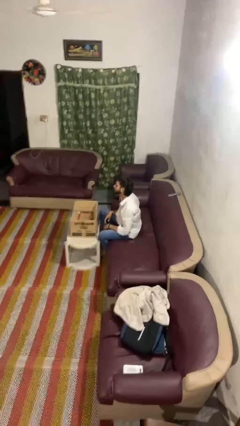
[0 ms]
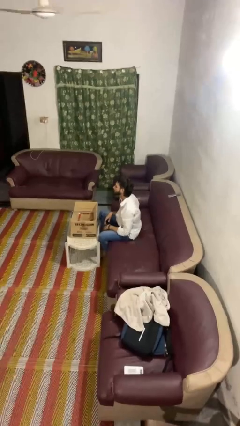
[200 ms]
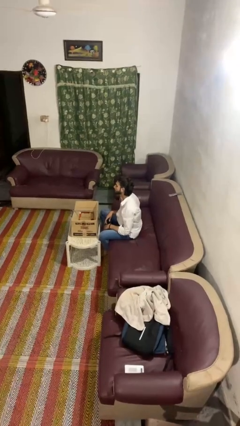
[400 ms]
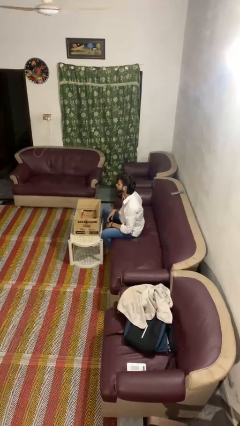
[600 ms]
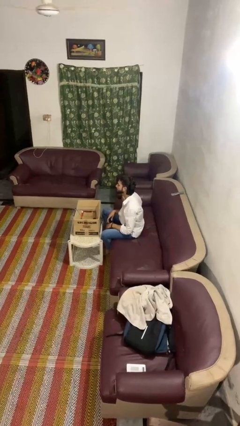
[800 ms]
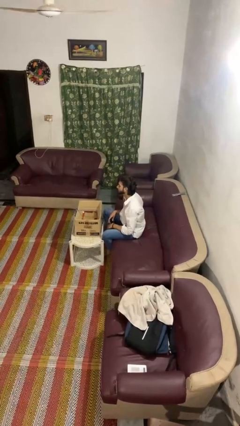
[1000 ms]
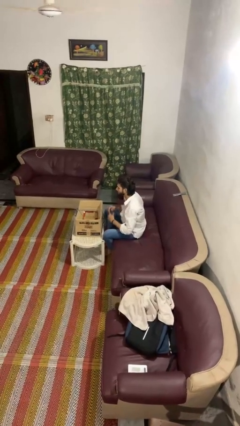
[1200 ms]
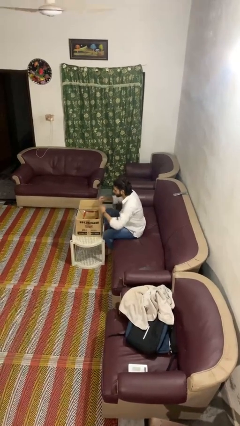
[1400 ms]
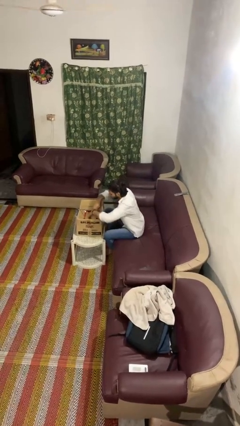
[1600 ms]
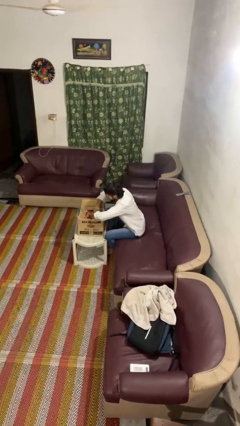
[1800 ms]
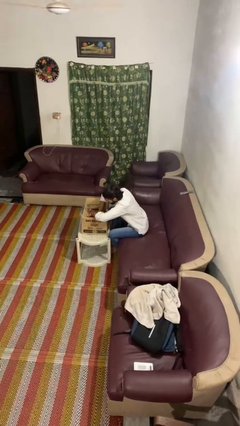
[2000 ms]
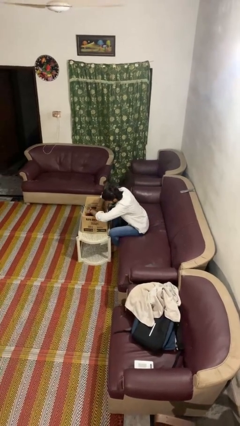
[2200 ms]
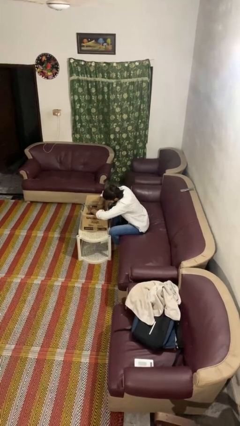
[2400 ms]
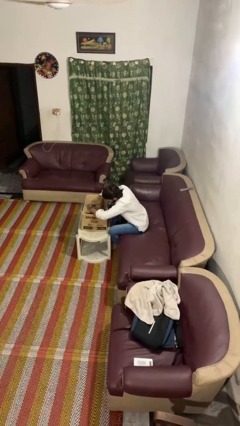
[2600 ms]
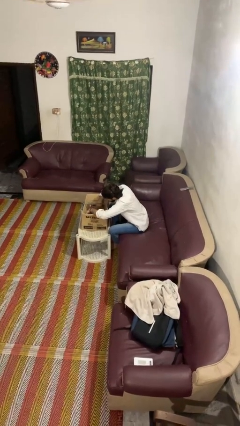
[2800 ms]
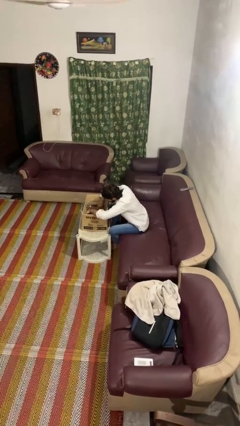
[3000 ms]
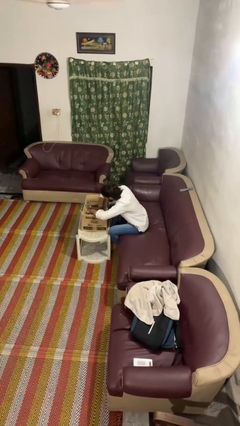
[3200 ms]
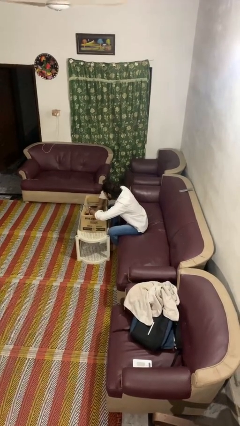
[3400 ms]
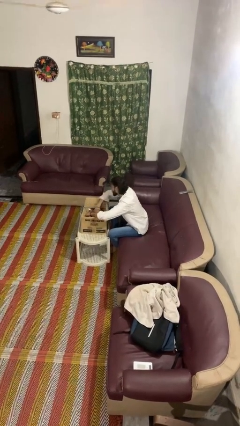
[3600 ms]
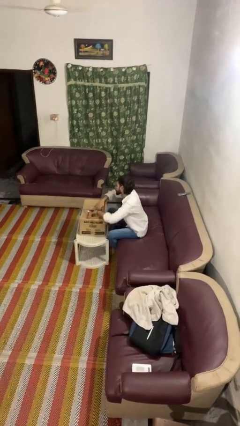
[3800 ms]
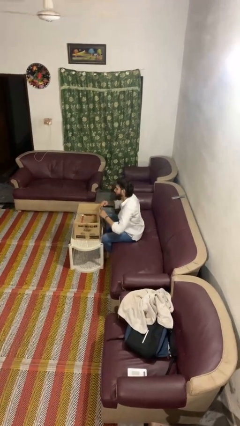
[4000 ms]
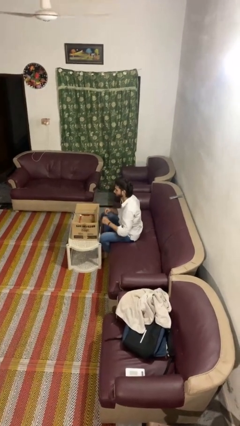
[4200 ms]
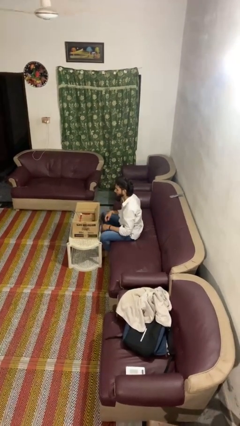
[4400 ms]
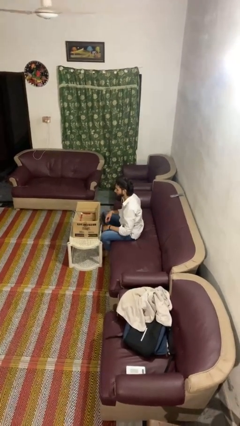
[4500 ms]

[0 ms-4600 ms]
person searches in box

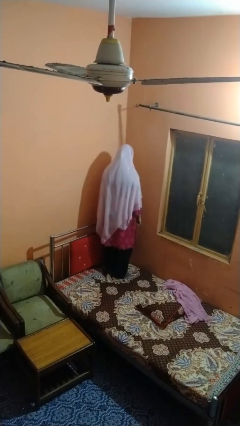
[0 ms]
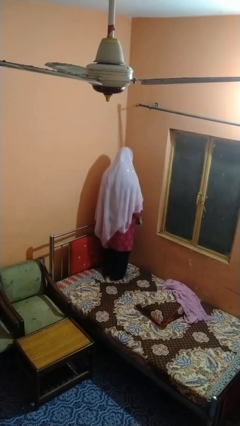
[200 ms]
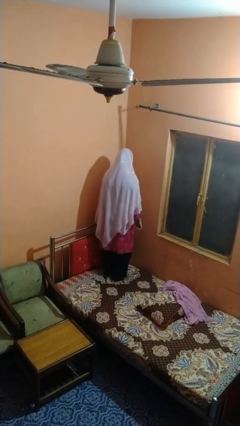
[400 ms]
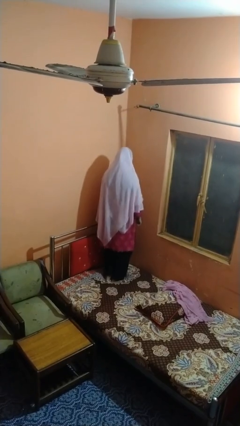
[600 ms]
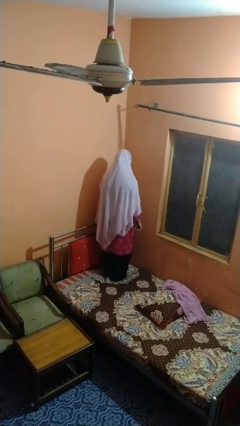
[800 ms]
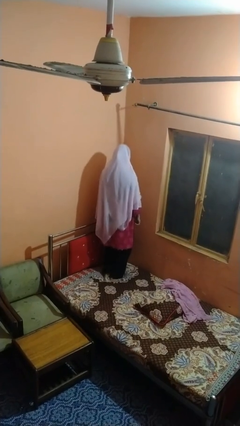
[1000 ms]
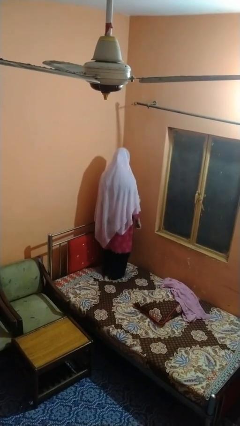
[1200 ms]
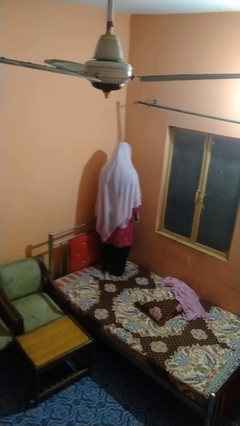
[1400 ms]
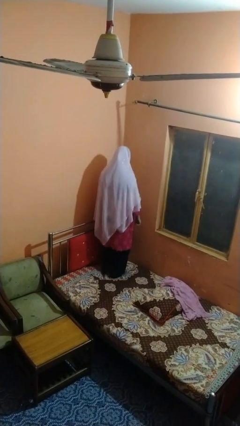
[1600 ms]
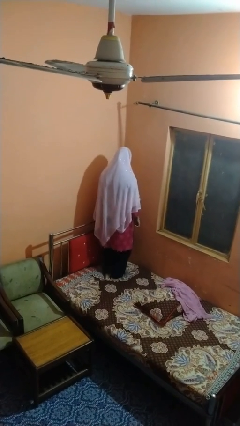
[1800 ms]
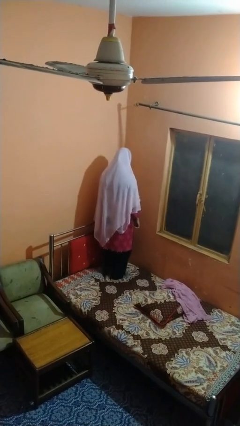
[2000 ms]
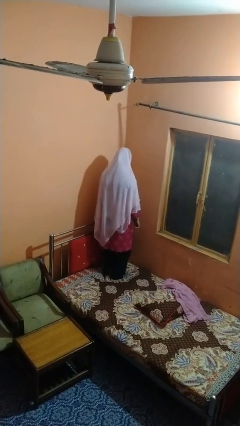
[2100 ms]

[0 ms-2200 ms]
person jumps on bed

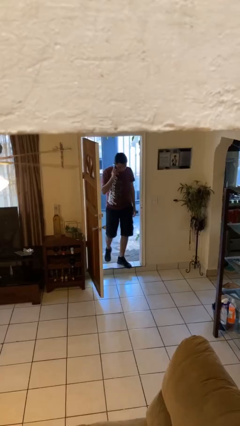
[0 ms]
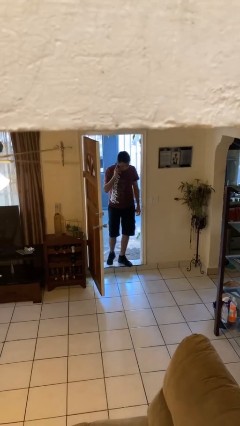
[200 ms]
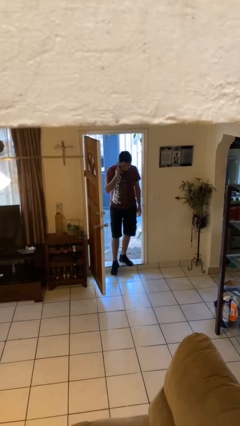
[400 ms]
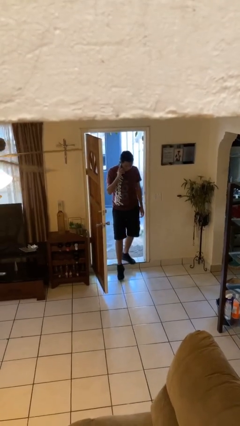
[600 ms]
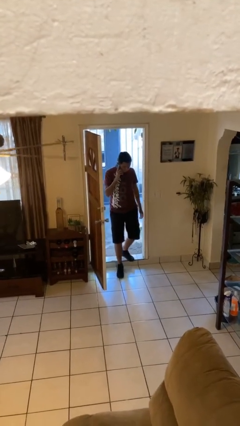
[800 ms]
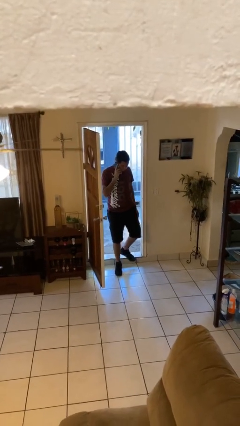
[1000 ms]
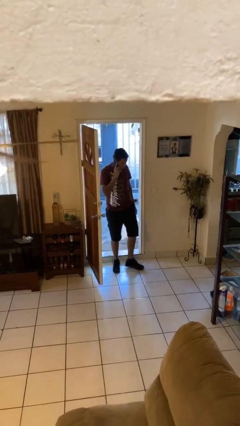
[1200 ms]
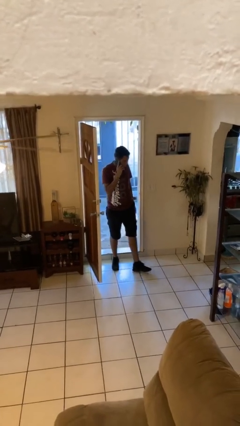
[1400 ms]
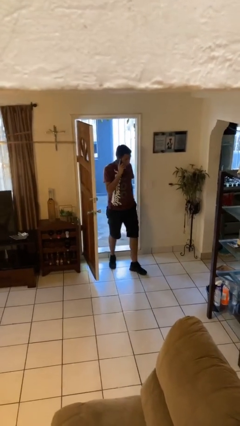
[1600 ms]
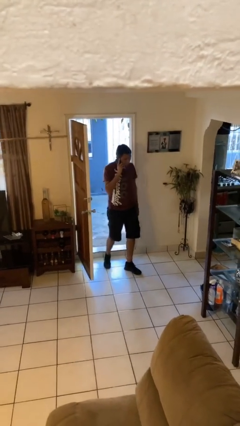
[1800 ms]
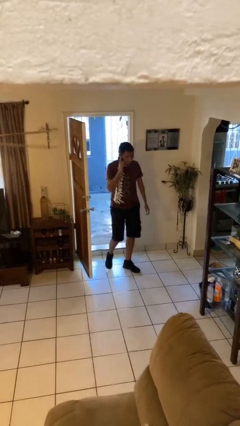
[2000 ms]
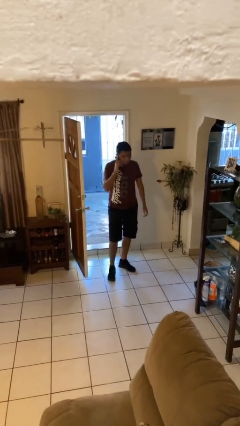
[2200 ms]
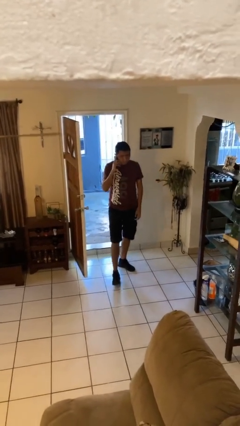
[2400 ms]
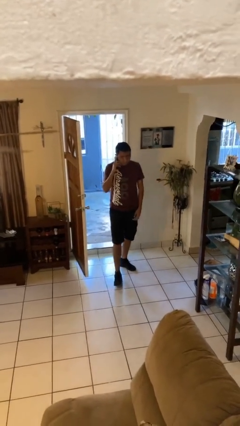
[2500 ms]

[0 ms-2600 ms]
person enters scene through structure

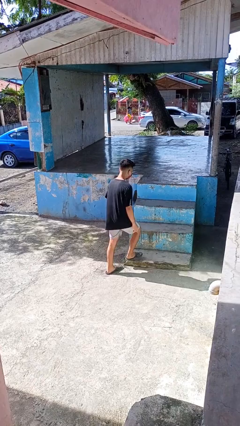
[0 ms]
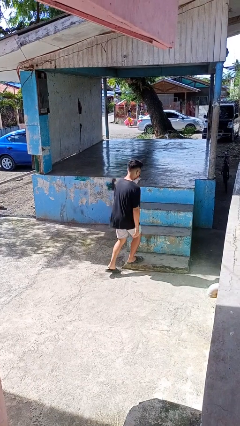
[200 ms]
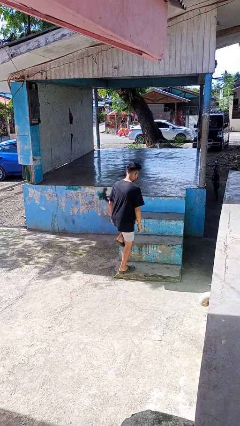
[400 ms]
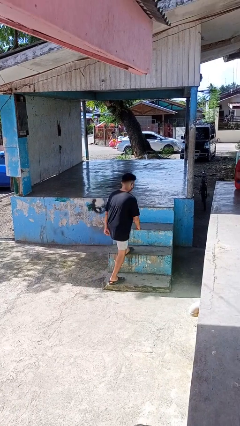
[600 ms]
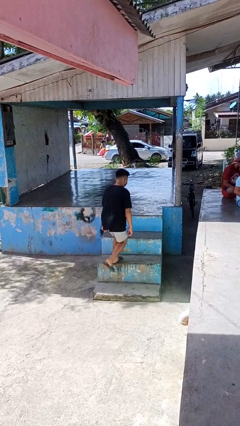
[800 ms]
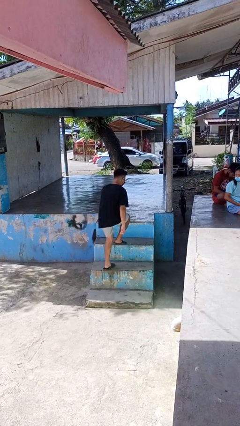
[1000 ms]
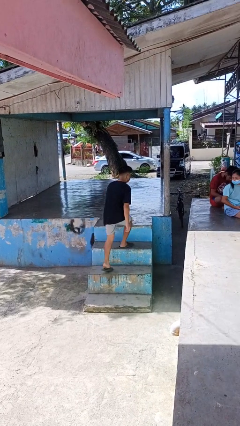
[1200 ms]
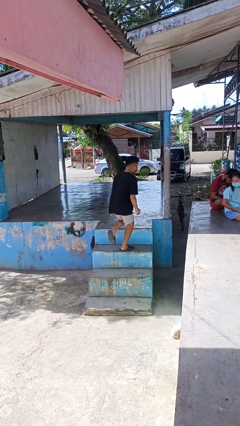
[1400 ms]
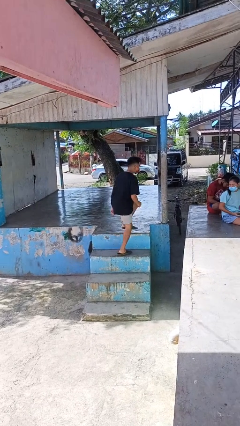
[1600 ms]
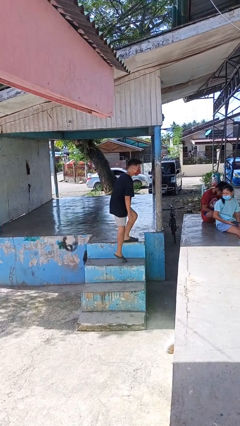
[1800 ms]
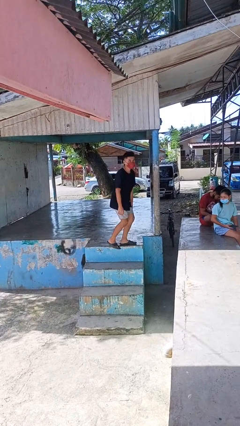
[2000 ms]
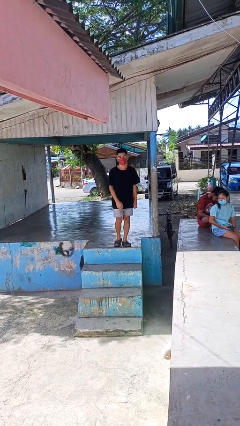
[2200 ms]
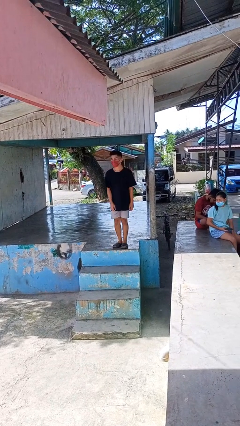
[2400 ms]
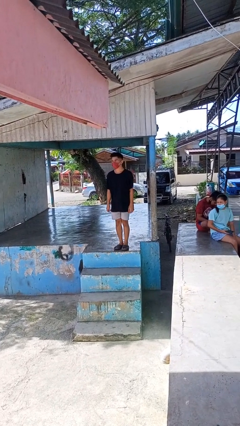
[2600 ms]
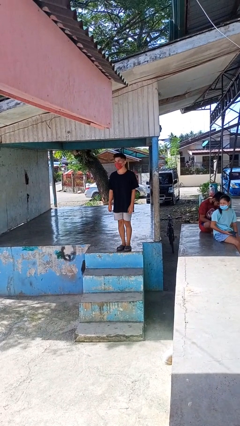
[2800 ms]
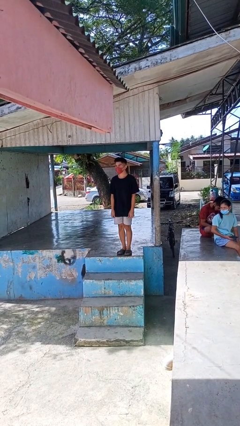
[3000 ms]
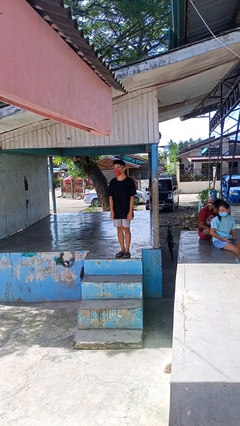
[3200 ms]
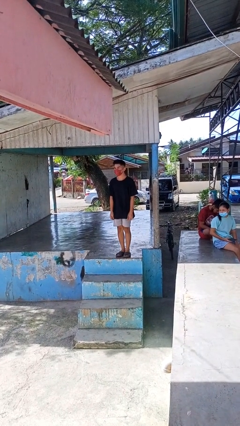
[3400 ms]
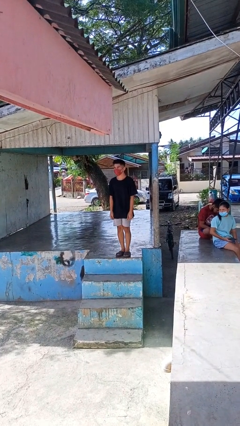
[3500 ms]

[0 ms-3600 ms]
person climbs up stairs

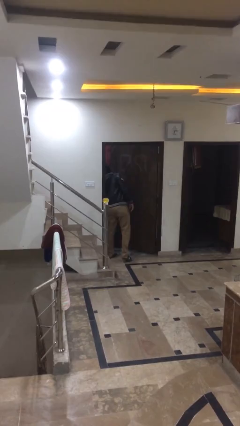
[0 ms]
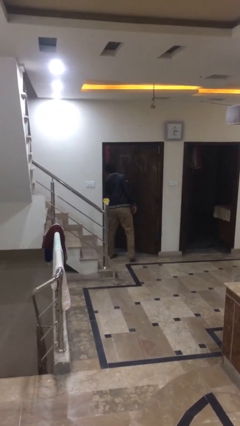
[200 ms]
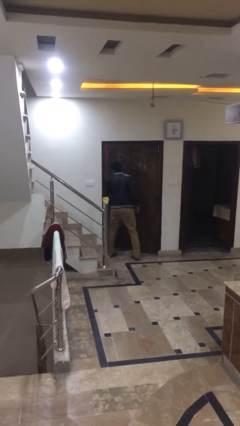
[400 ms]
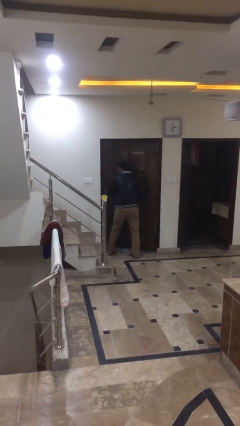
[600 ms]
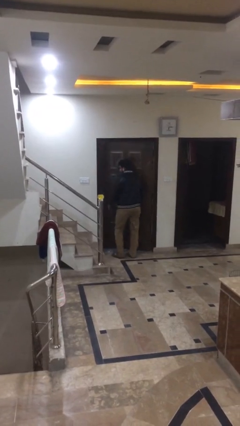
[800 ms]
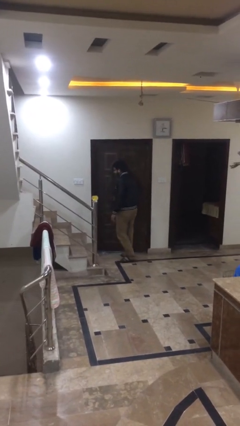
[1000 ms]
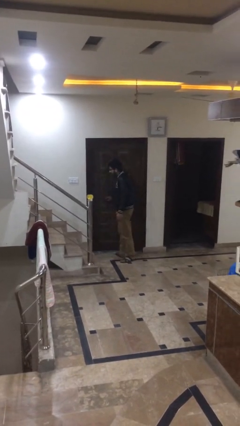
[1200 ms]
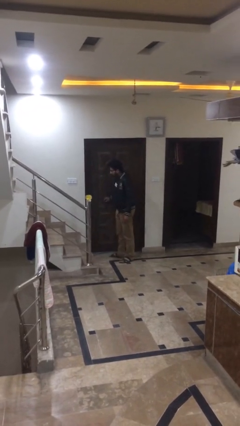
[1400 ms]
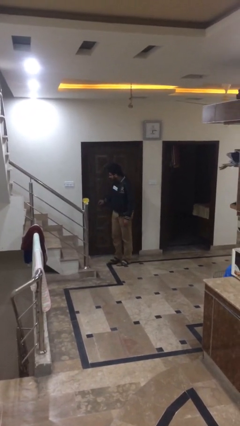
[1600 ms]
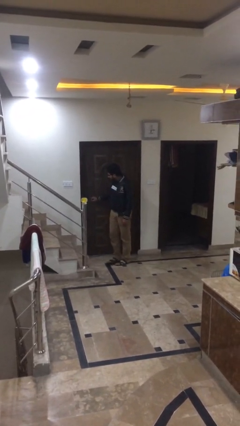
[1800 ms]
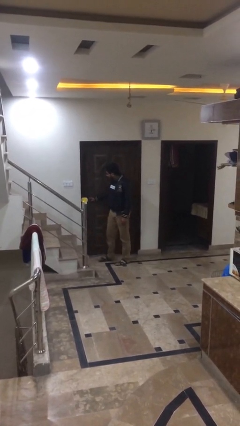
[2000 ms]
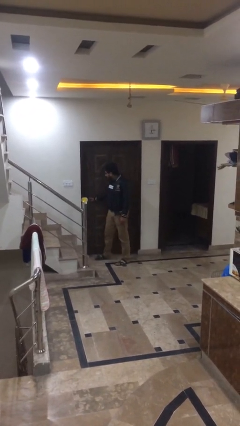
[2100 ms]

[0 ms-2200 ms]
person closes facility door

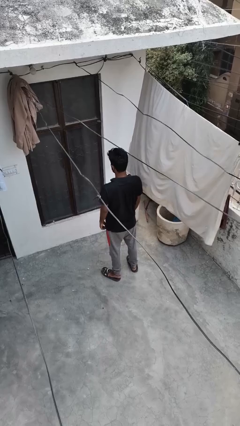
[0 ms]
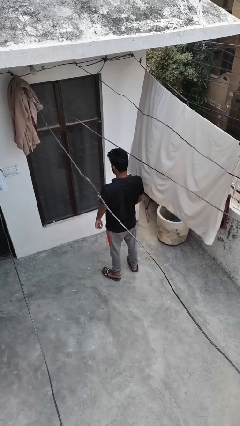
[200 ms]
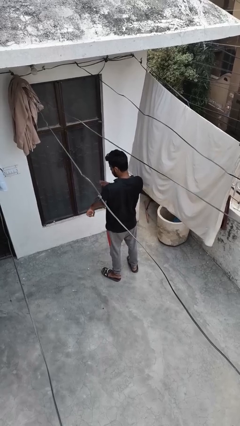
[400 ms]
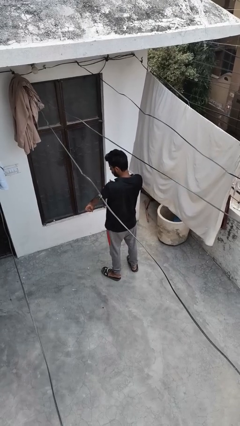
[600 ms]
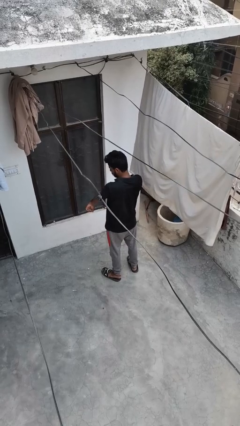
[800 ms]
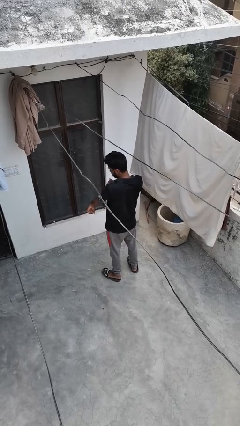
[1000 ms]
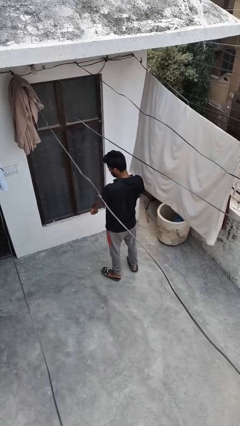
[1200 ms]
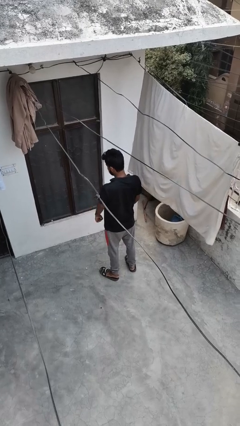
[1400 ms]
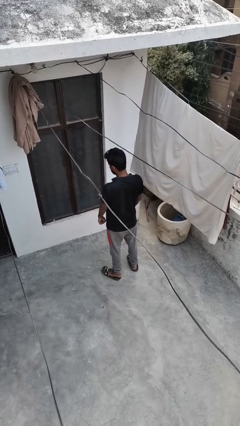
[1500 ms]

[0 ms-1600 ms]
person swats bug

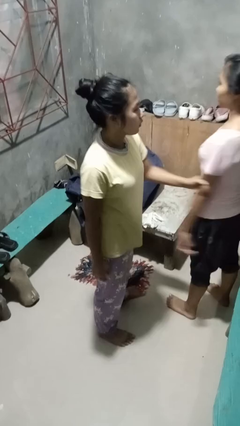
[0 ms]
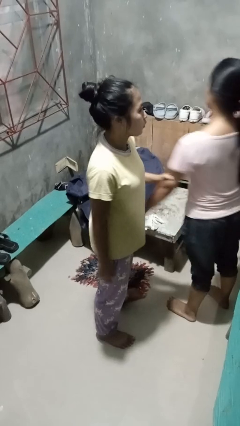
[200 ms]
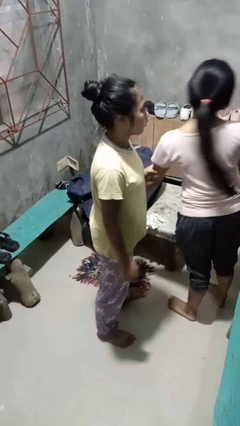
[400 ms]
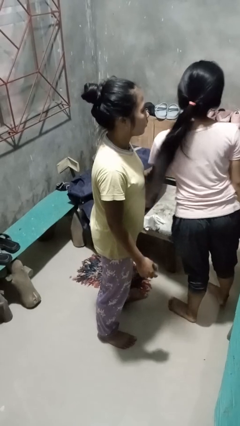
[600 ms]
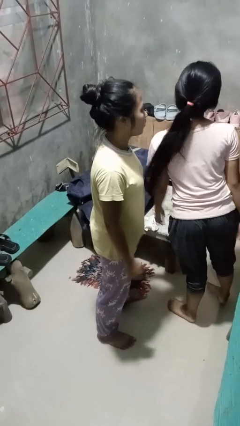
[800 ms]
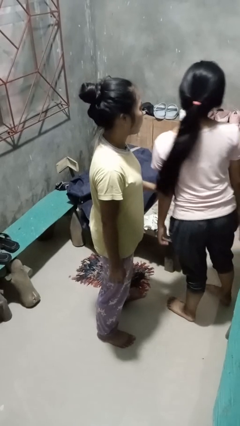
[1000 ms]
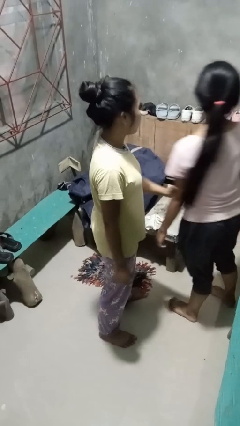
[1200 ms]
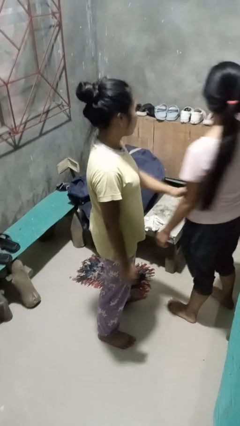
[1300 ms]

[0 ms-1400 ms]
person grabs person by bicep
